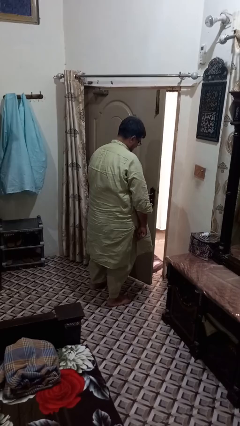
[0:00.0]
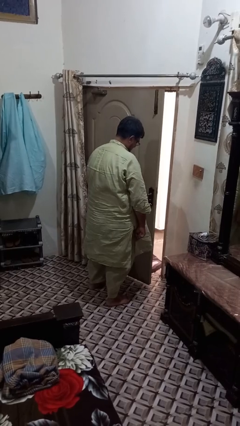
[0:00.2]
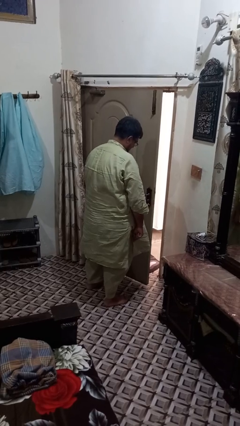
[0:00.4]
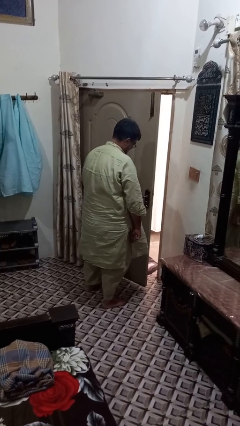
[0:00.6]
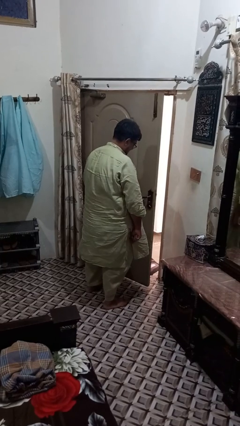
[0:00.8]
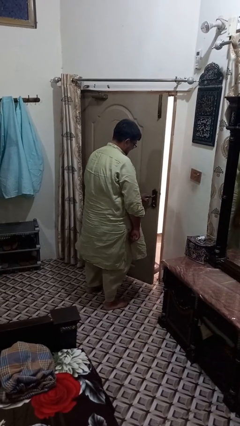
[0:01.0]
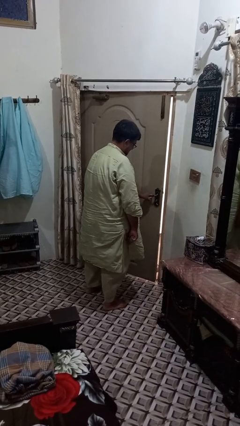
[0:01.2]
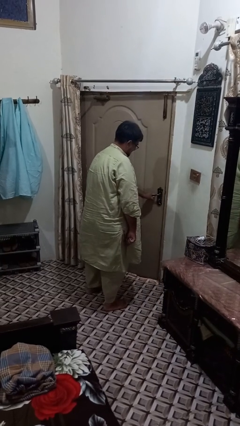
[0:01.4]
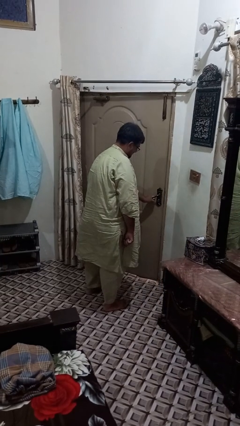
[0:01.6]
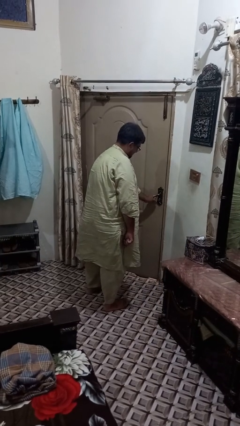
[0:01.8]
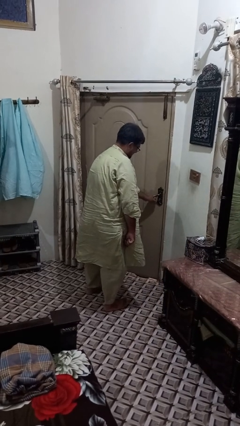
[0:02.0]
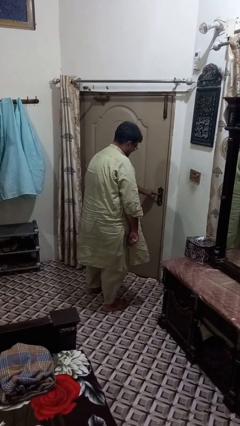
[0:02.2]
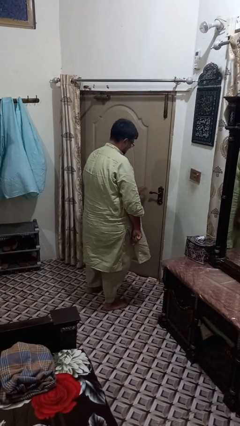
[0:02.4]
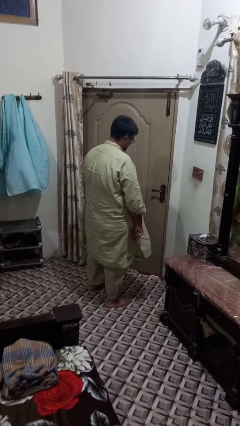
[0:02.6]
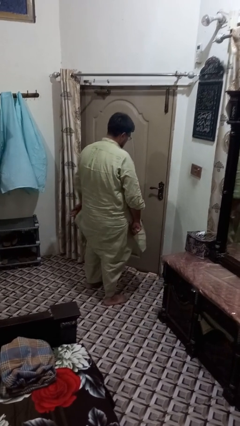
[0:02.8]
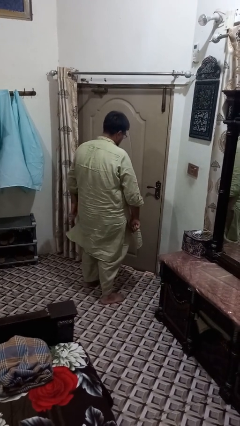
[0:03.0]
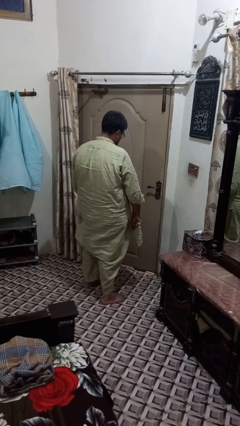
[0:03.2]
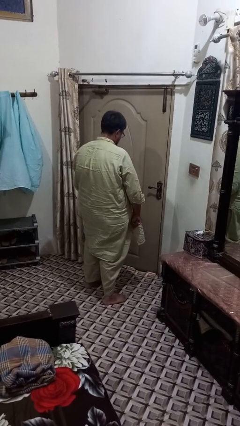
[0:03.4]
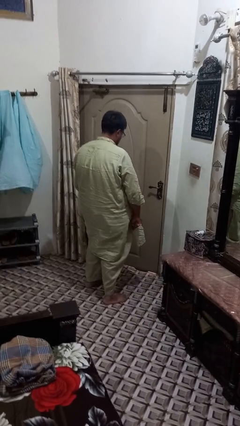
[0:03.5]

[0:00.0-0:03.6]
person closes facility door

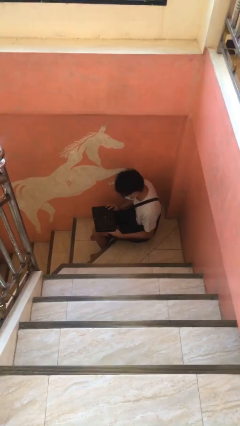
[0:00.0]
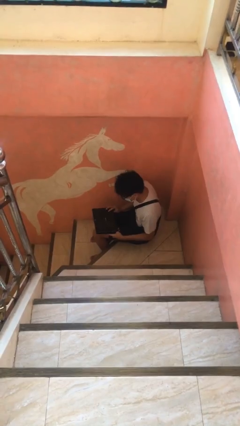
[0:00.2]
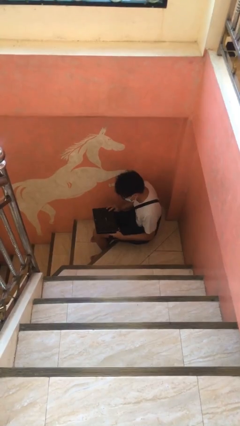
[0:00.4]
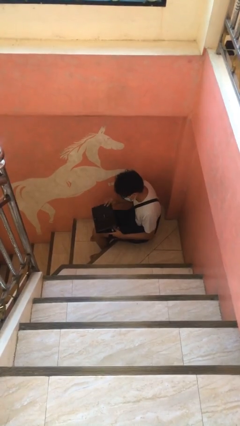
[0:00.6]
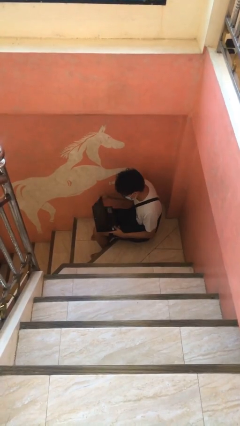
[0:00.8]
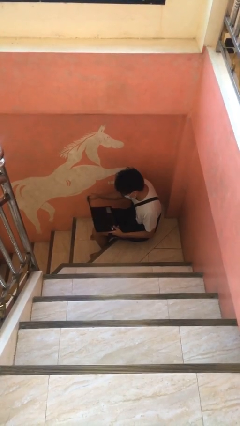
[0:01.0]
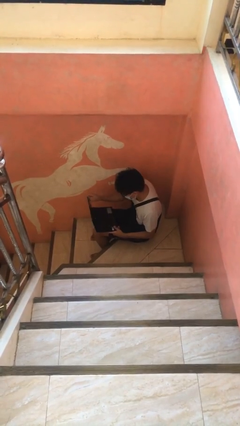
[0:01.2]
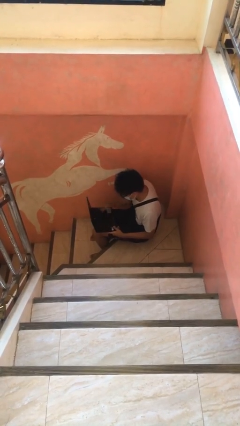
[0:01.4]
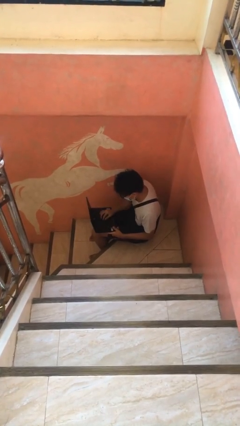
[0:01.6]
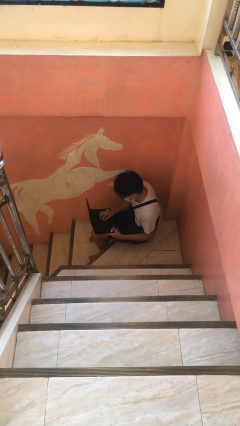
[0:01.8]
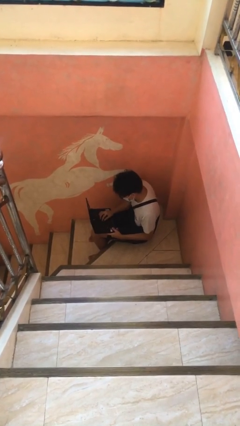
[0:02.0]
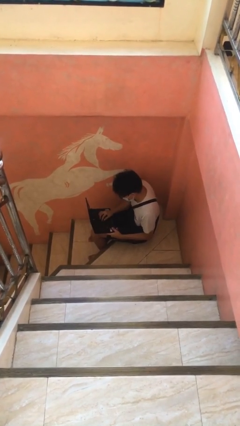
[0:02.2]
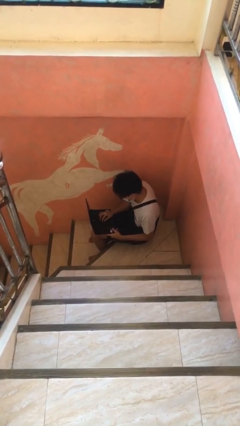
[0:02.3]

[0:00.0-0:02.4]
person interacts with laptop

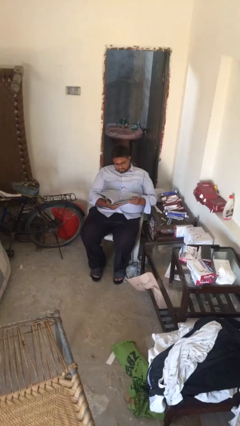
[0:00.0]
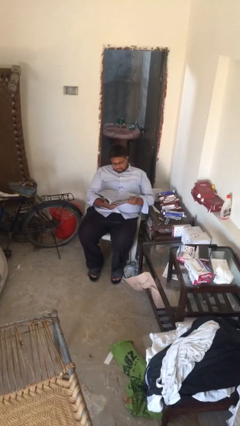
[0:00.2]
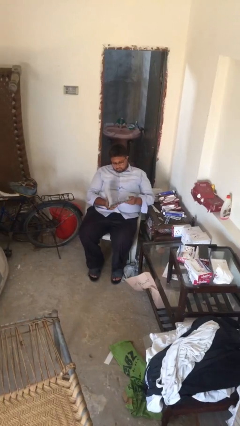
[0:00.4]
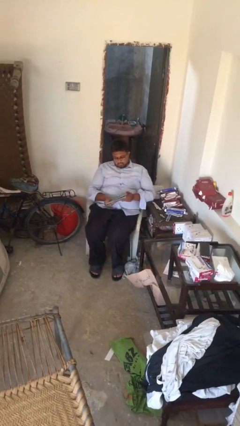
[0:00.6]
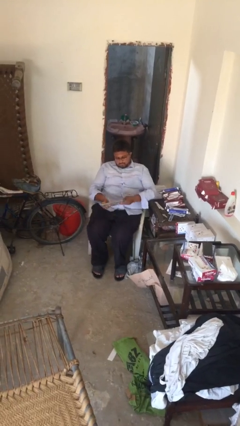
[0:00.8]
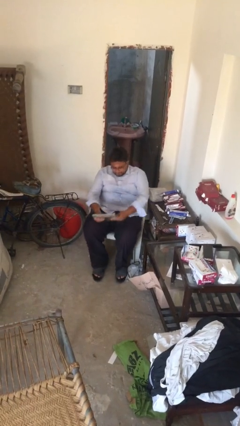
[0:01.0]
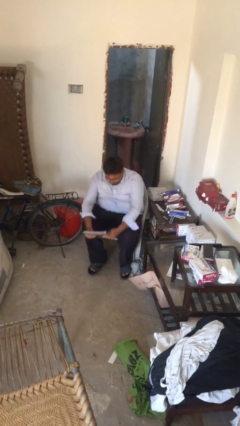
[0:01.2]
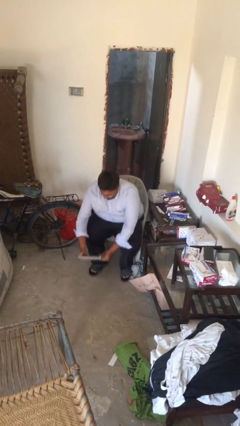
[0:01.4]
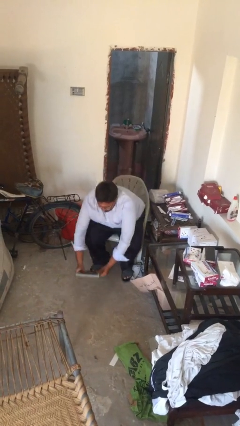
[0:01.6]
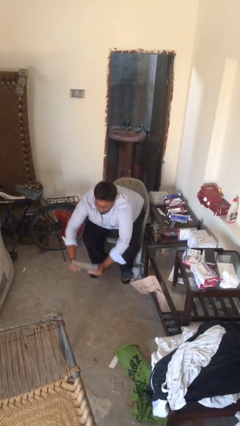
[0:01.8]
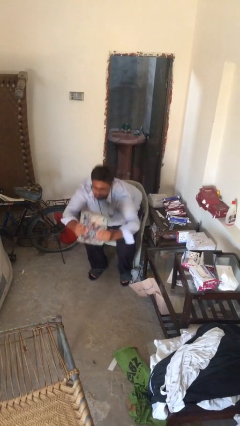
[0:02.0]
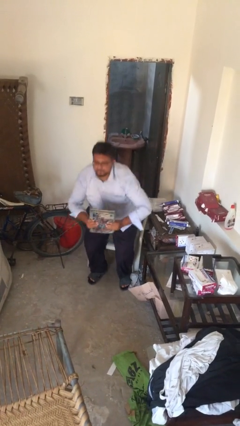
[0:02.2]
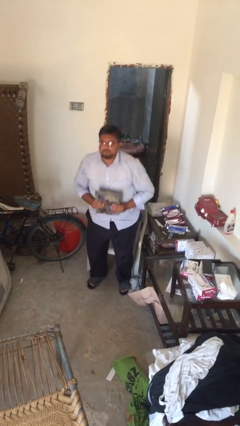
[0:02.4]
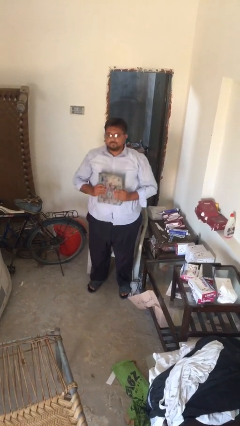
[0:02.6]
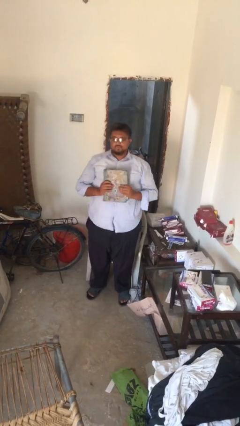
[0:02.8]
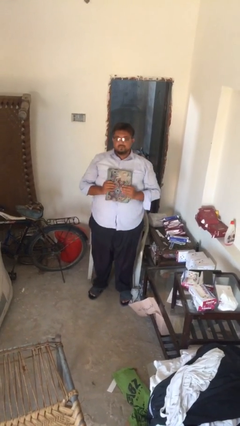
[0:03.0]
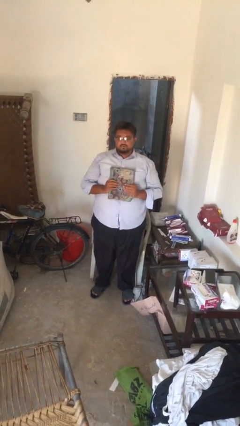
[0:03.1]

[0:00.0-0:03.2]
person stands up

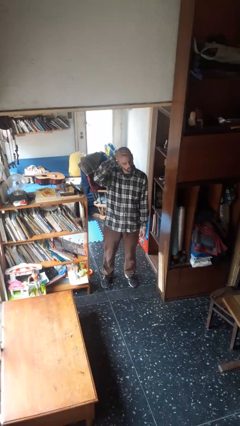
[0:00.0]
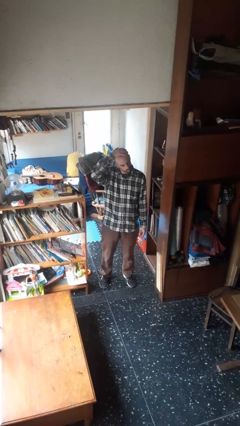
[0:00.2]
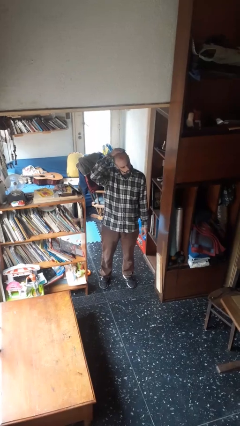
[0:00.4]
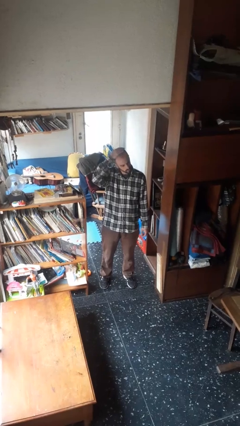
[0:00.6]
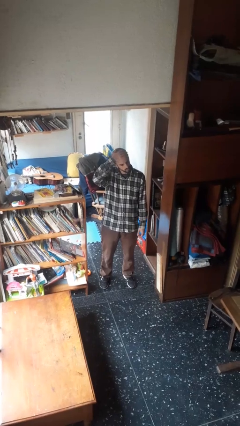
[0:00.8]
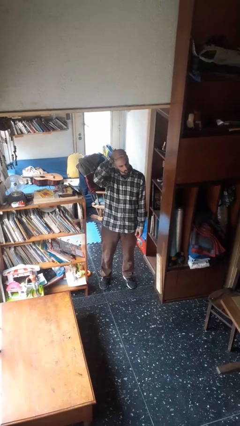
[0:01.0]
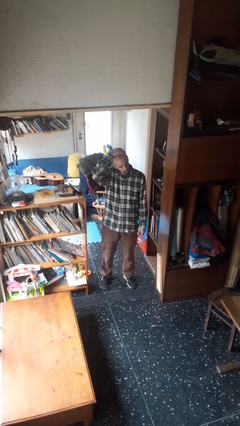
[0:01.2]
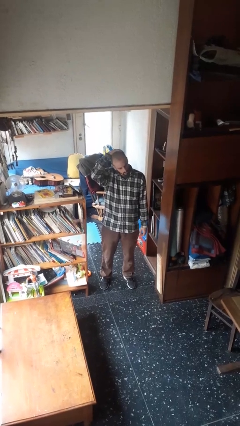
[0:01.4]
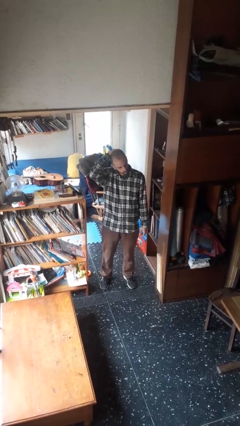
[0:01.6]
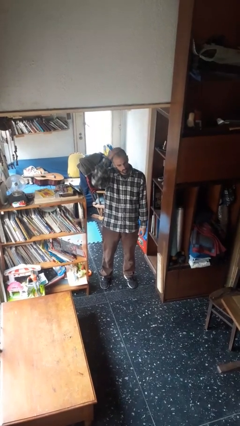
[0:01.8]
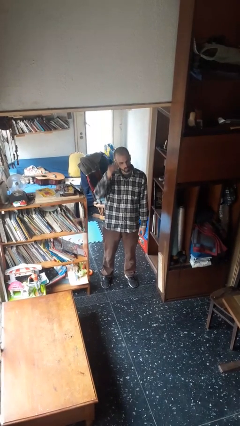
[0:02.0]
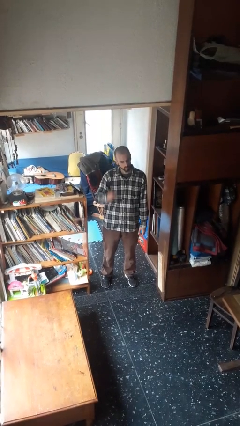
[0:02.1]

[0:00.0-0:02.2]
person pats head

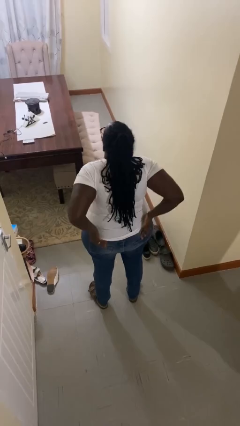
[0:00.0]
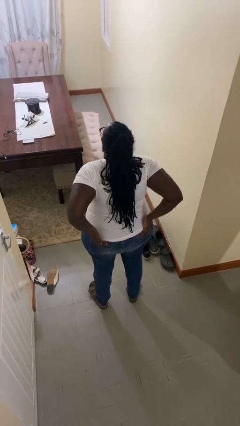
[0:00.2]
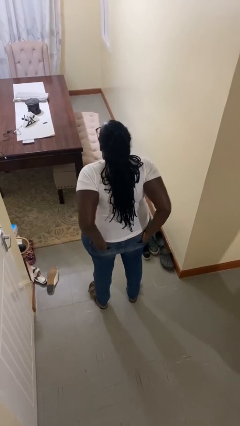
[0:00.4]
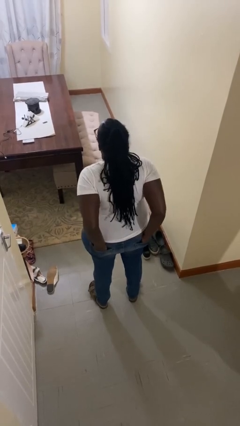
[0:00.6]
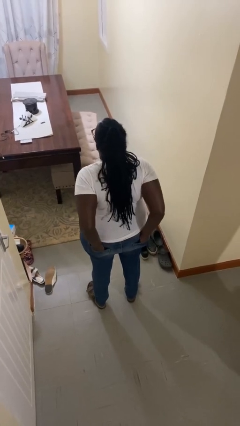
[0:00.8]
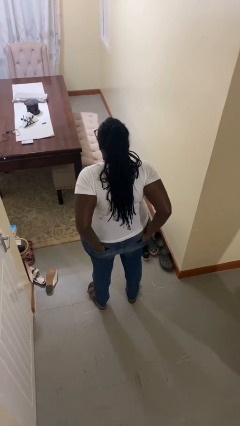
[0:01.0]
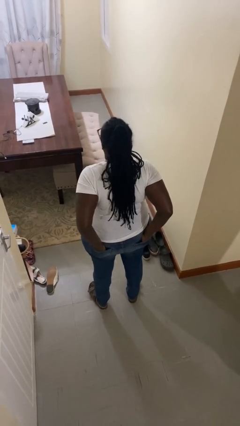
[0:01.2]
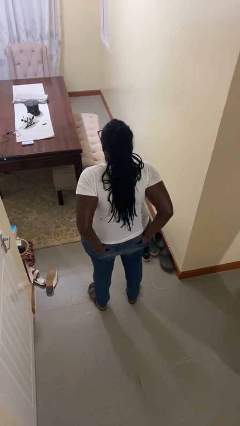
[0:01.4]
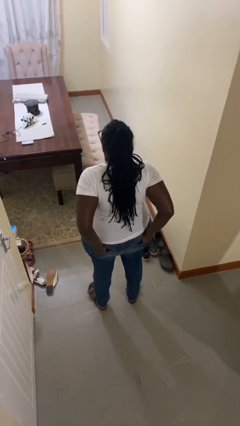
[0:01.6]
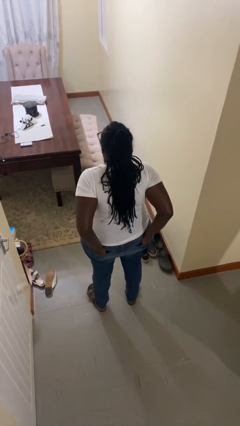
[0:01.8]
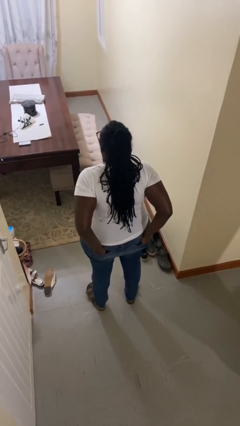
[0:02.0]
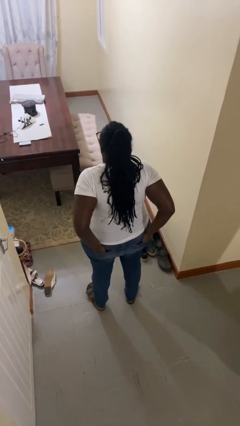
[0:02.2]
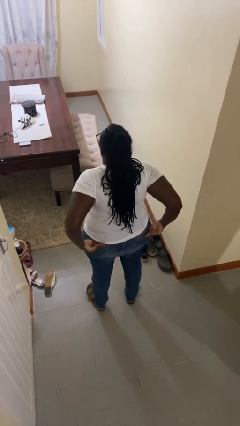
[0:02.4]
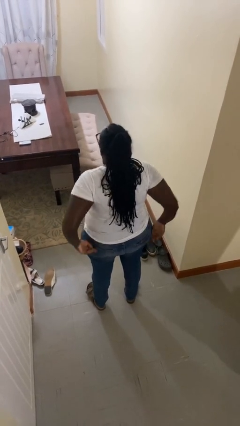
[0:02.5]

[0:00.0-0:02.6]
person puts hands in back pockets

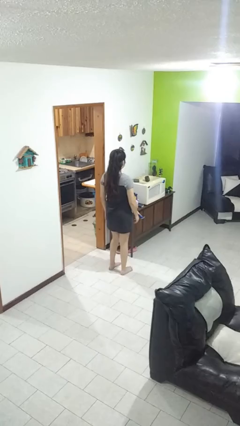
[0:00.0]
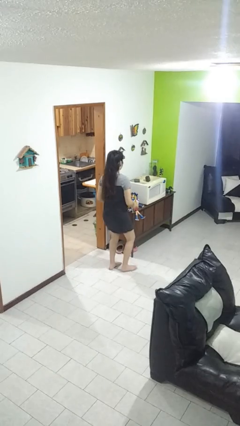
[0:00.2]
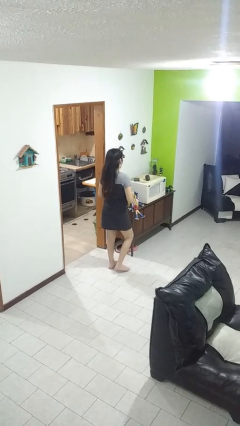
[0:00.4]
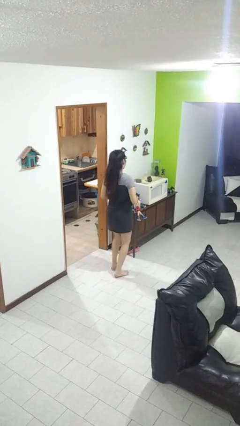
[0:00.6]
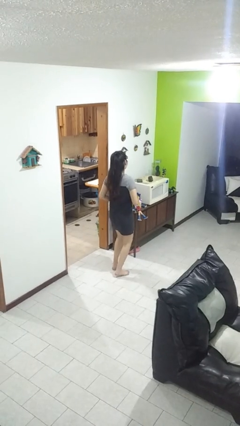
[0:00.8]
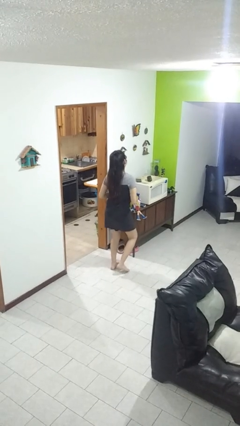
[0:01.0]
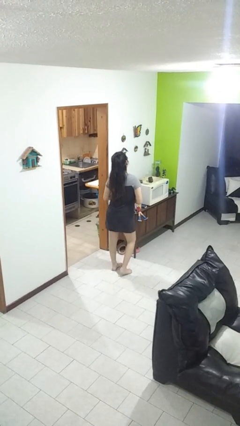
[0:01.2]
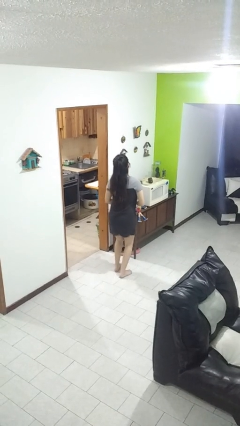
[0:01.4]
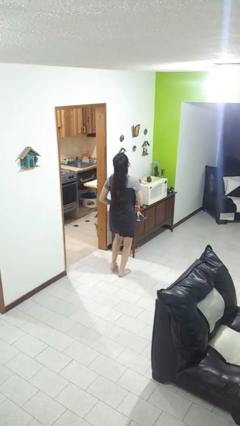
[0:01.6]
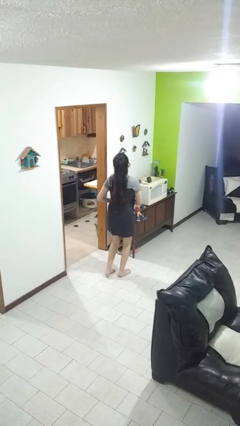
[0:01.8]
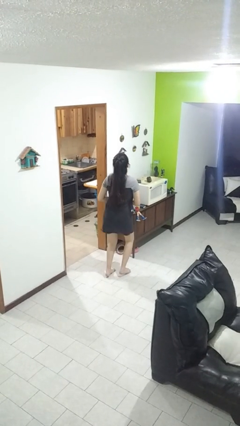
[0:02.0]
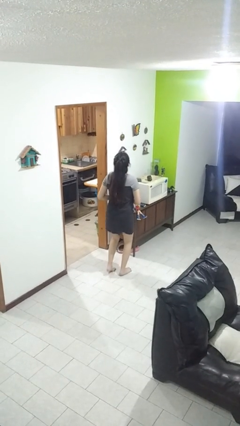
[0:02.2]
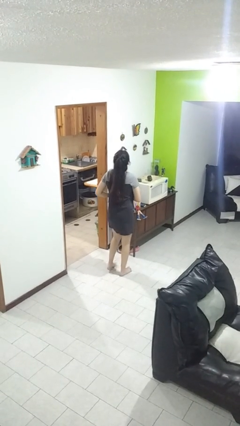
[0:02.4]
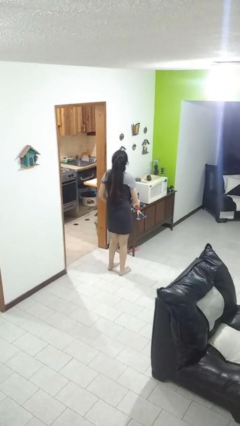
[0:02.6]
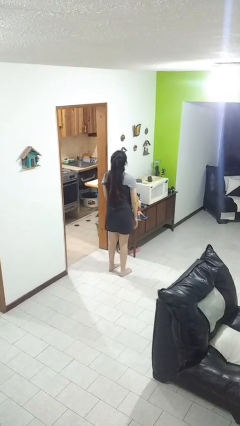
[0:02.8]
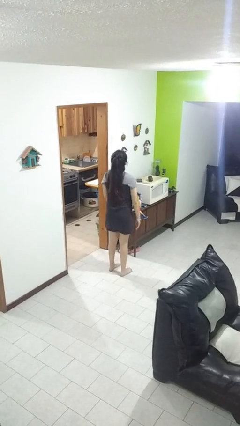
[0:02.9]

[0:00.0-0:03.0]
person dances in place

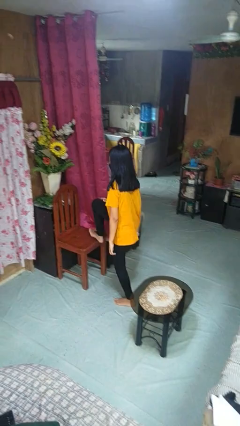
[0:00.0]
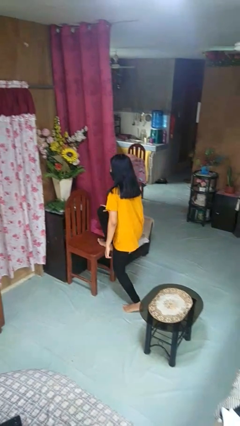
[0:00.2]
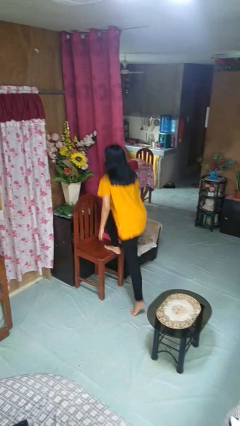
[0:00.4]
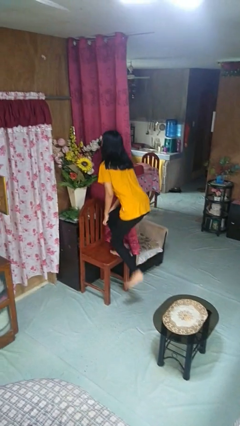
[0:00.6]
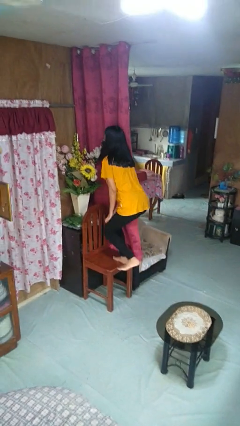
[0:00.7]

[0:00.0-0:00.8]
person climbs on chair
